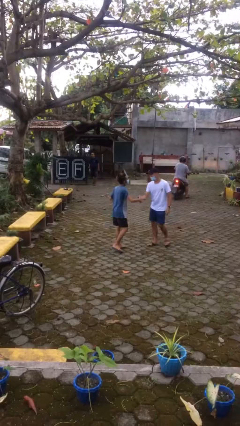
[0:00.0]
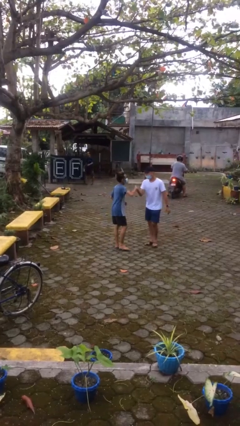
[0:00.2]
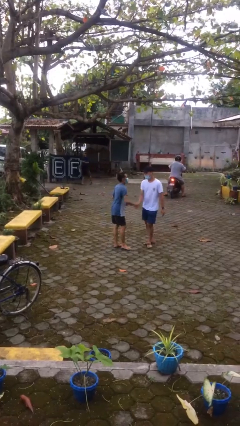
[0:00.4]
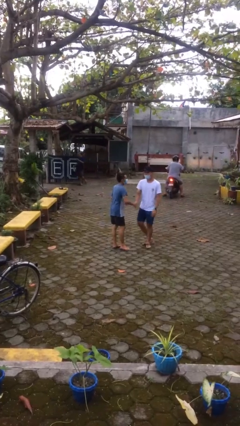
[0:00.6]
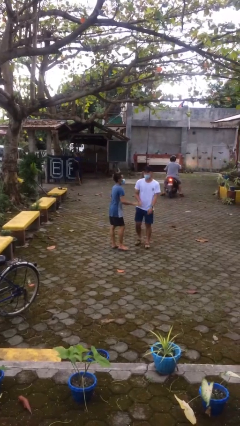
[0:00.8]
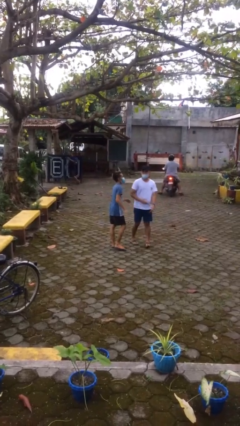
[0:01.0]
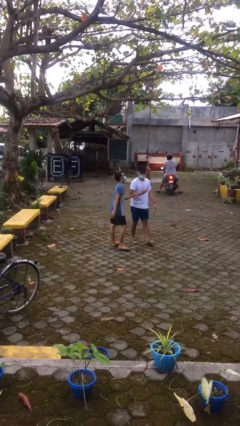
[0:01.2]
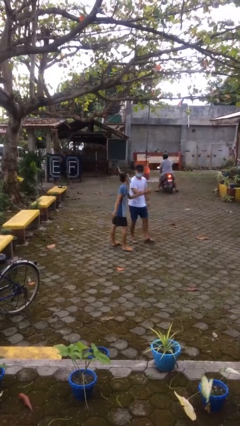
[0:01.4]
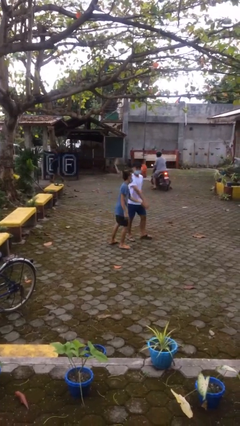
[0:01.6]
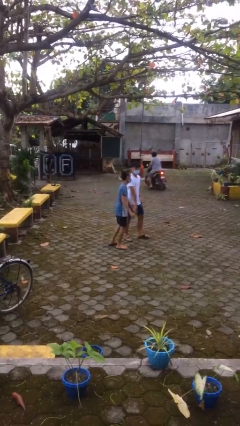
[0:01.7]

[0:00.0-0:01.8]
person shakes hand

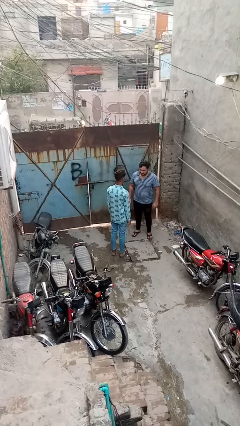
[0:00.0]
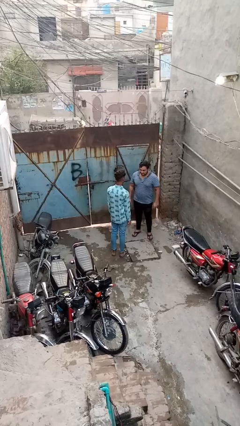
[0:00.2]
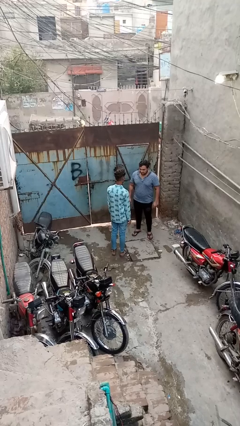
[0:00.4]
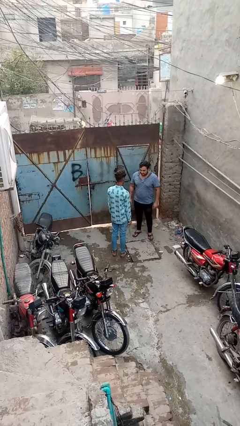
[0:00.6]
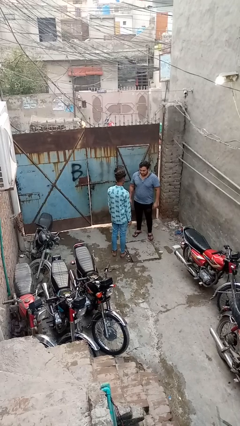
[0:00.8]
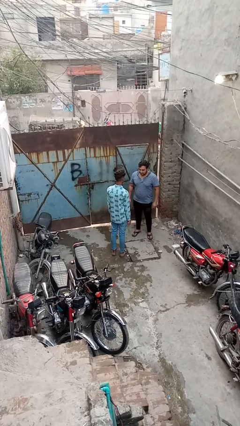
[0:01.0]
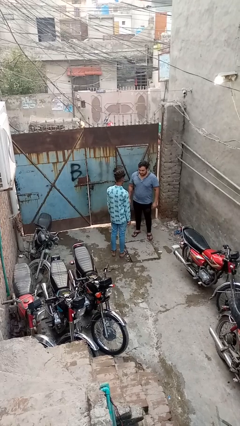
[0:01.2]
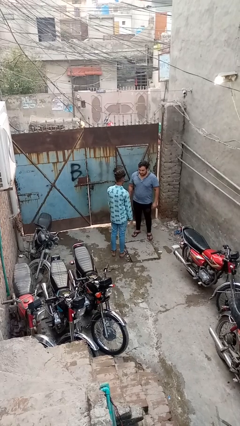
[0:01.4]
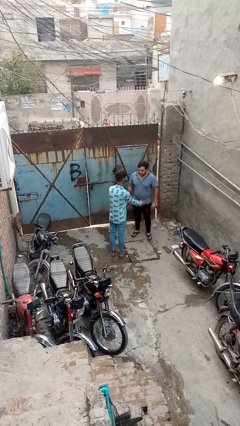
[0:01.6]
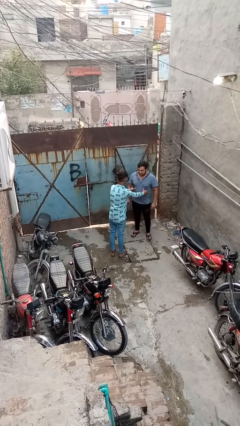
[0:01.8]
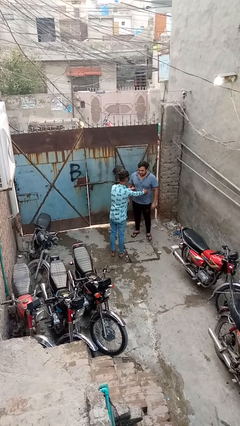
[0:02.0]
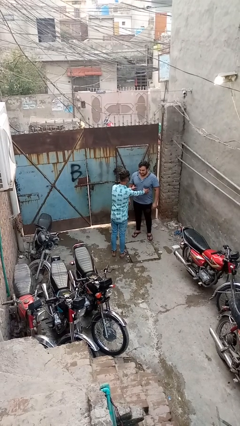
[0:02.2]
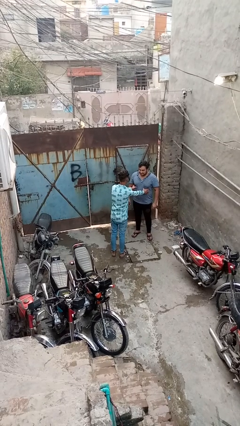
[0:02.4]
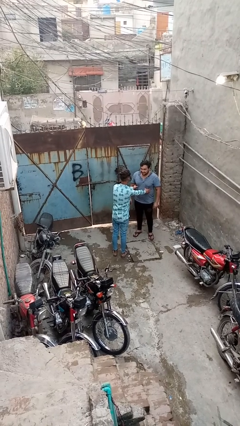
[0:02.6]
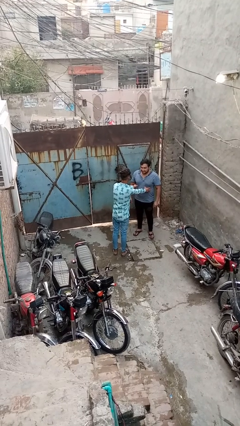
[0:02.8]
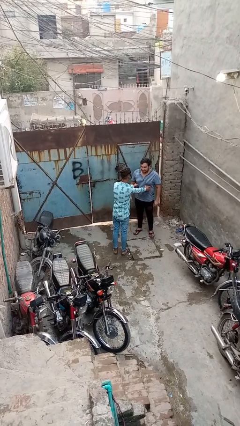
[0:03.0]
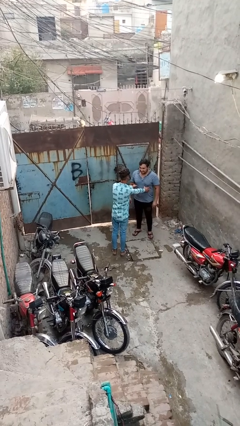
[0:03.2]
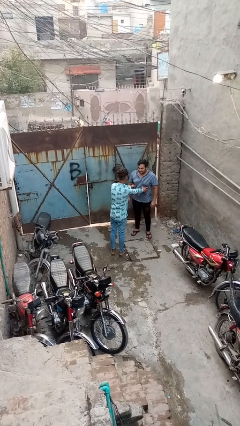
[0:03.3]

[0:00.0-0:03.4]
person tickles person

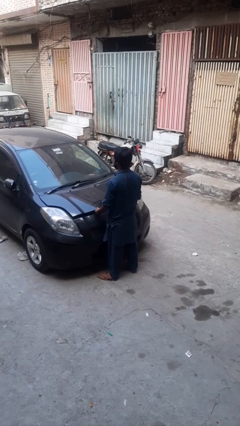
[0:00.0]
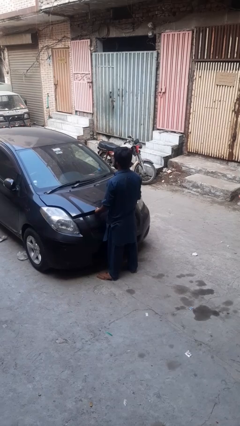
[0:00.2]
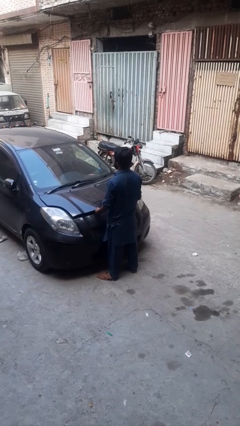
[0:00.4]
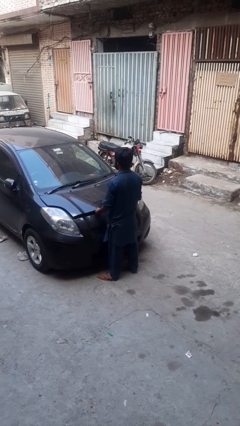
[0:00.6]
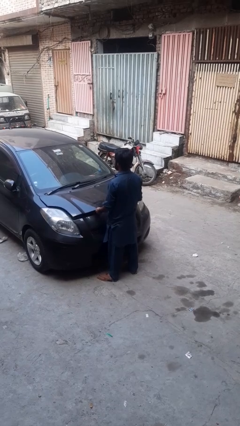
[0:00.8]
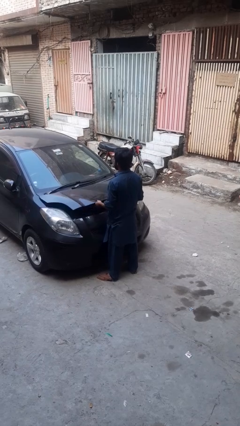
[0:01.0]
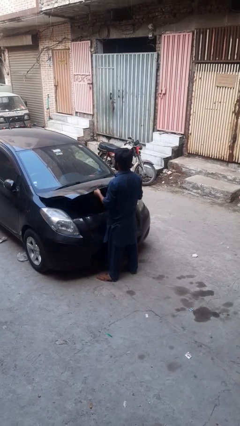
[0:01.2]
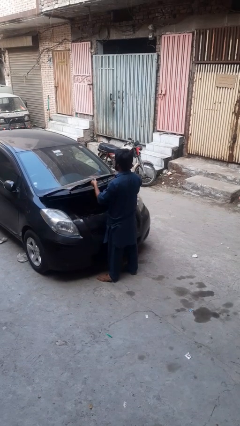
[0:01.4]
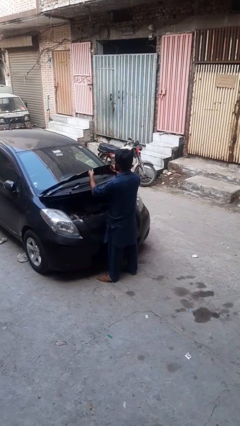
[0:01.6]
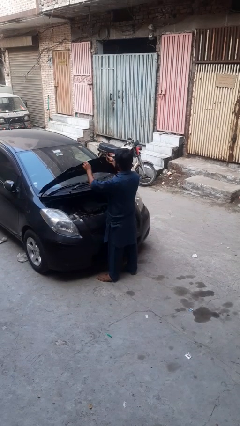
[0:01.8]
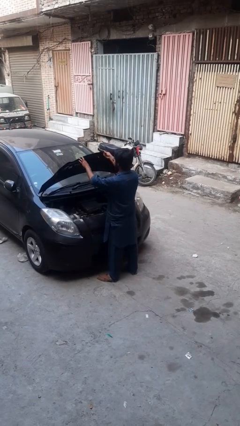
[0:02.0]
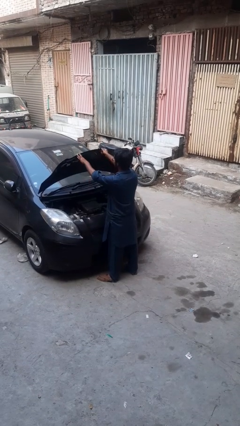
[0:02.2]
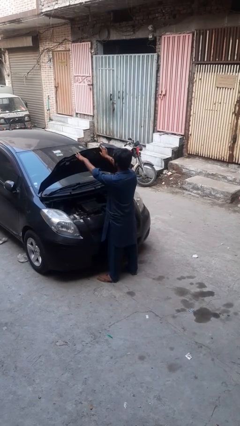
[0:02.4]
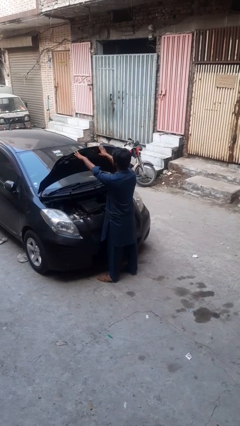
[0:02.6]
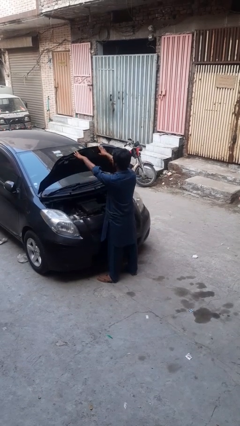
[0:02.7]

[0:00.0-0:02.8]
person opens car hood

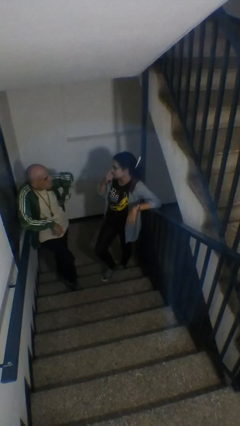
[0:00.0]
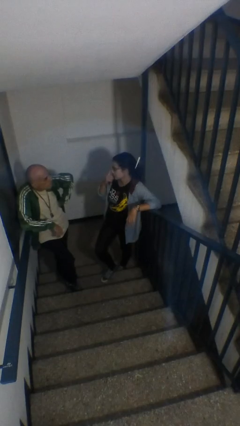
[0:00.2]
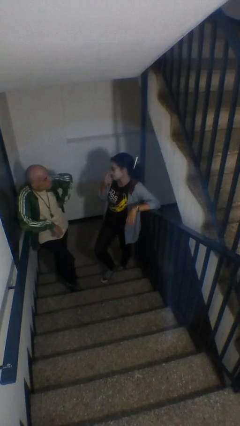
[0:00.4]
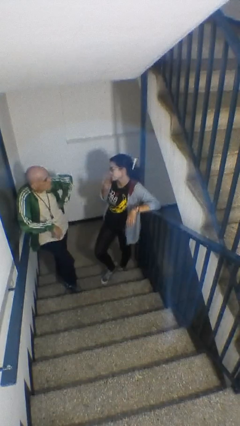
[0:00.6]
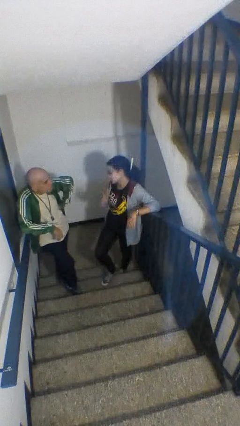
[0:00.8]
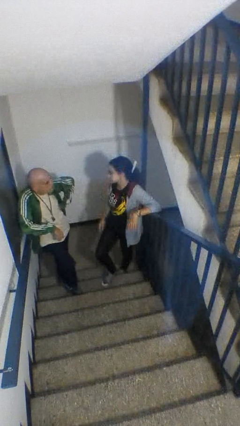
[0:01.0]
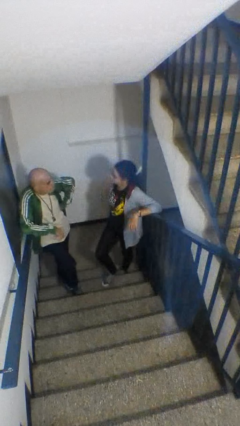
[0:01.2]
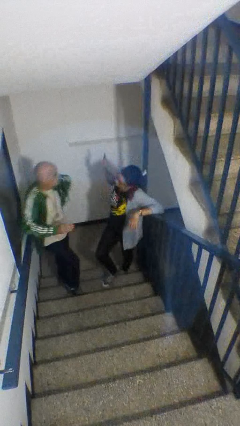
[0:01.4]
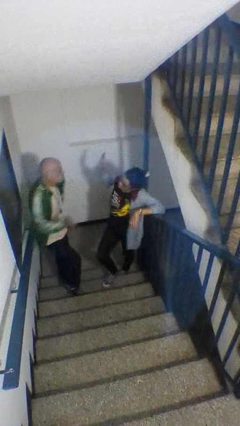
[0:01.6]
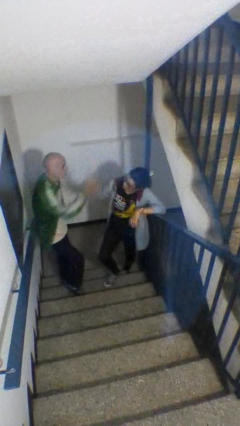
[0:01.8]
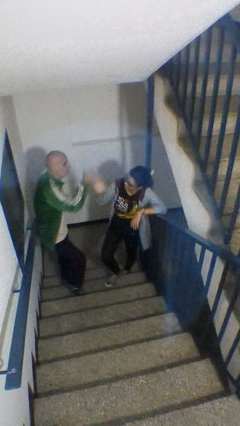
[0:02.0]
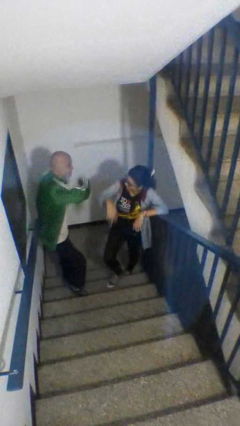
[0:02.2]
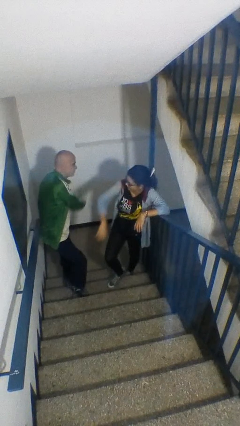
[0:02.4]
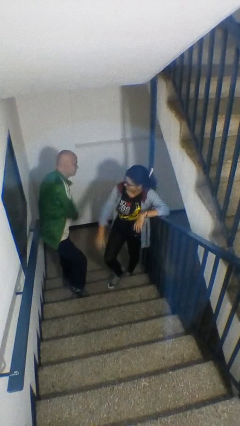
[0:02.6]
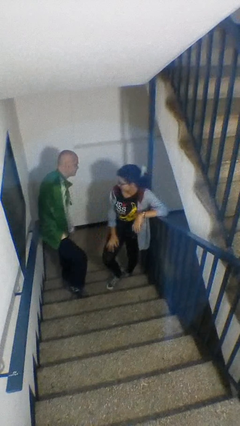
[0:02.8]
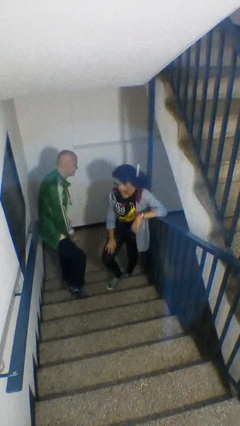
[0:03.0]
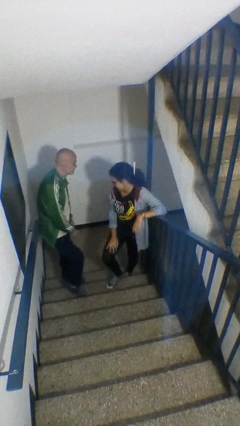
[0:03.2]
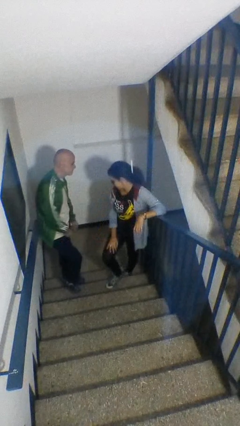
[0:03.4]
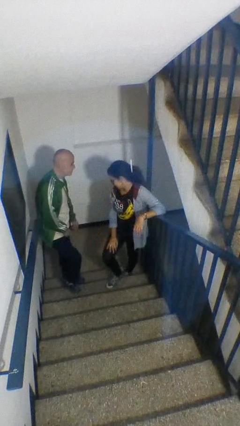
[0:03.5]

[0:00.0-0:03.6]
person highfives hand

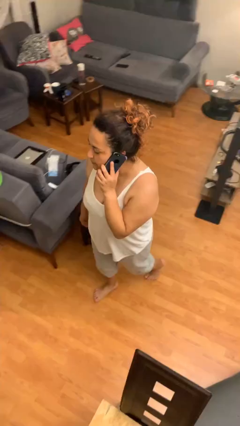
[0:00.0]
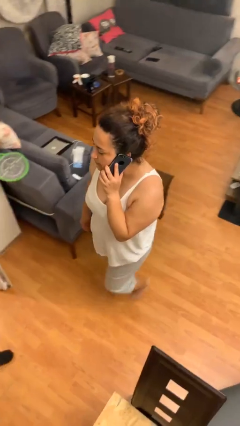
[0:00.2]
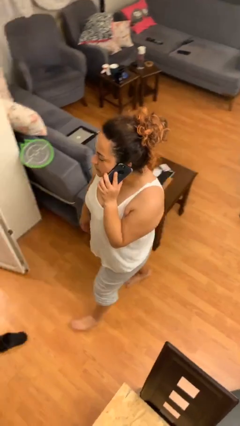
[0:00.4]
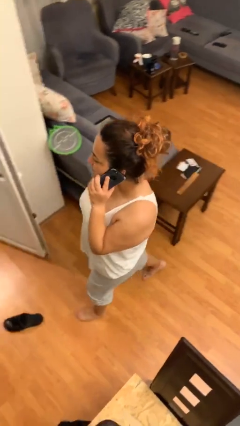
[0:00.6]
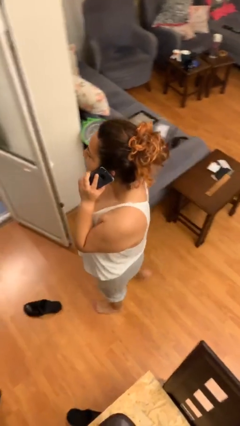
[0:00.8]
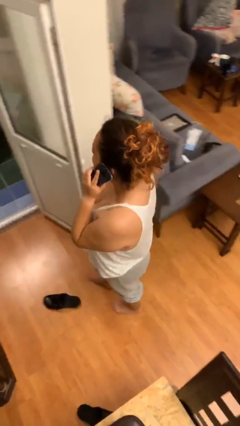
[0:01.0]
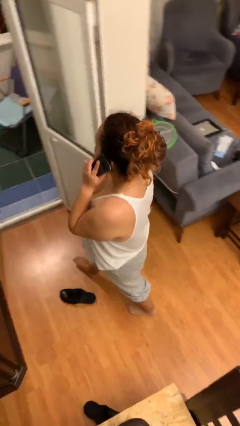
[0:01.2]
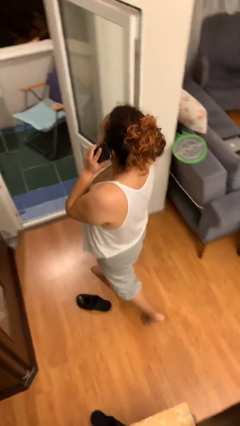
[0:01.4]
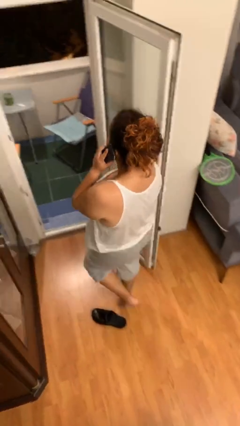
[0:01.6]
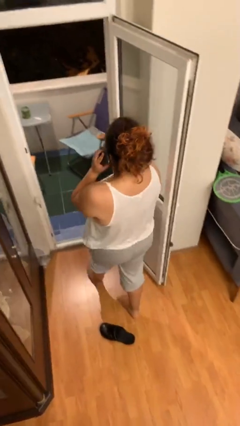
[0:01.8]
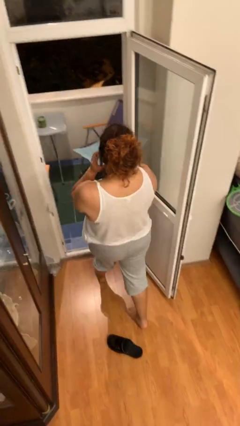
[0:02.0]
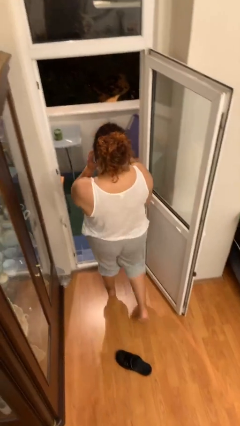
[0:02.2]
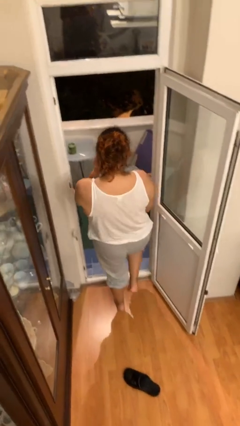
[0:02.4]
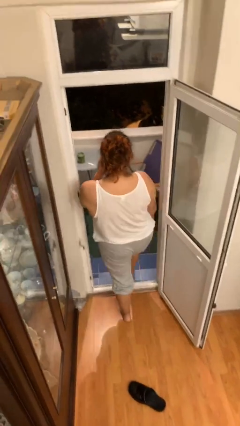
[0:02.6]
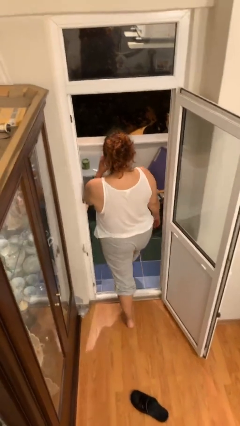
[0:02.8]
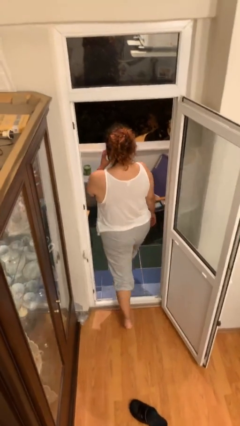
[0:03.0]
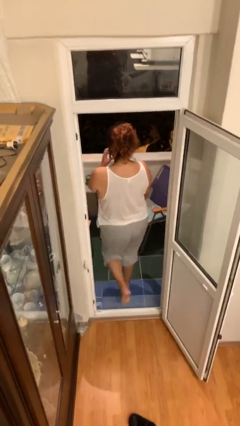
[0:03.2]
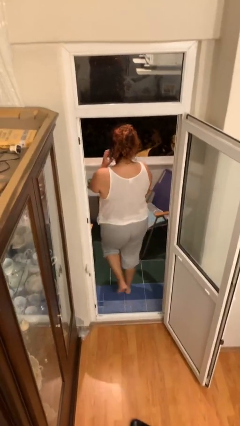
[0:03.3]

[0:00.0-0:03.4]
person exits scene through structure

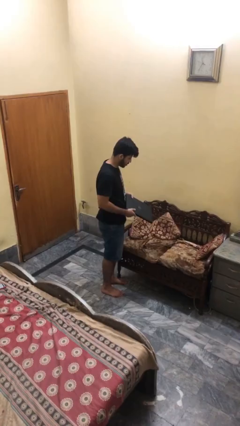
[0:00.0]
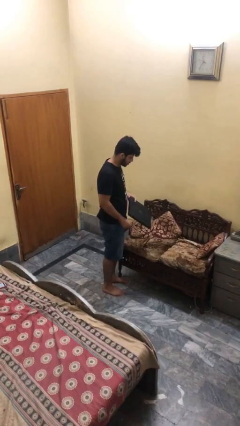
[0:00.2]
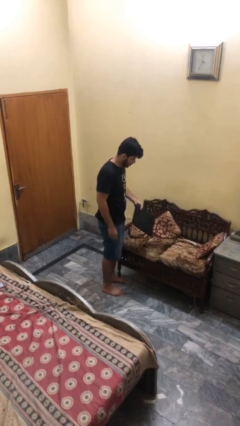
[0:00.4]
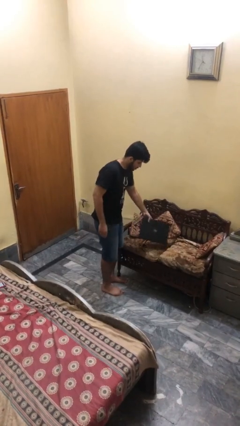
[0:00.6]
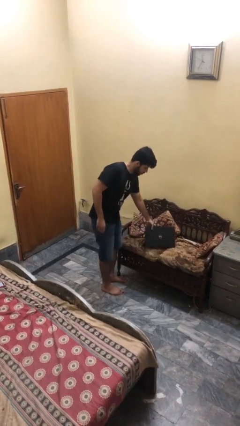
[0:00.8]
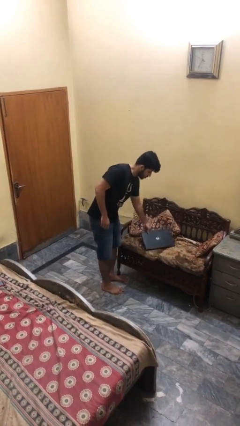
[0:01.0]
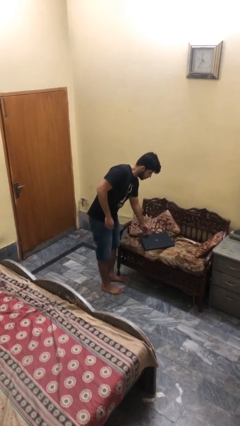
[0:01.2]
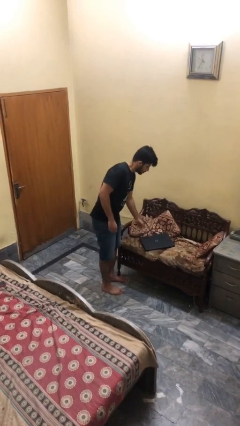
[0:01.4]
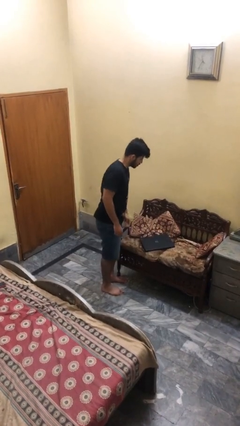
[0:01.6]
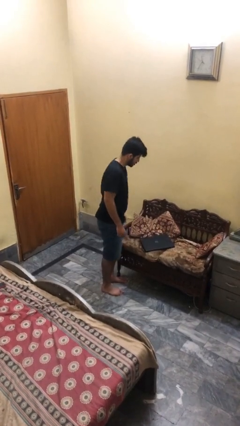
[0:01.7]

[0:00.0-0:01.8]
person puts down object on couch

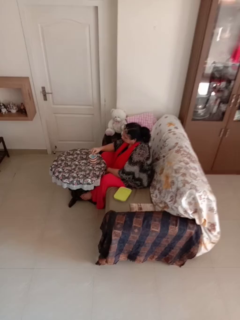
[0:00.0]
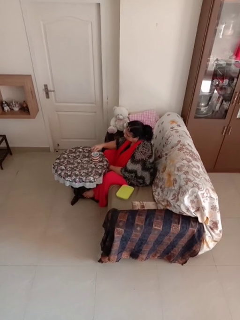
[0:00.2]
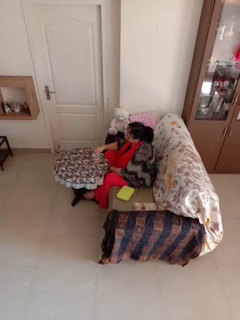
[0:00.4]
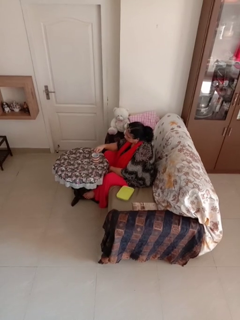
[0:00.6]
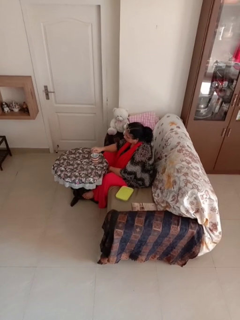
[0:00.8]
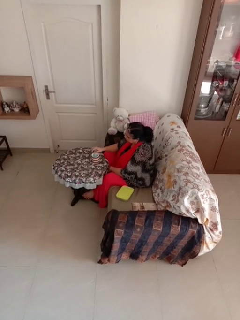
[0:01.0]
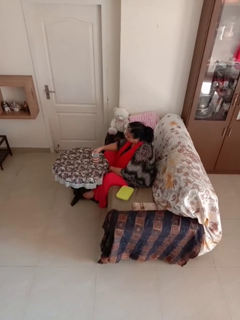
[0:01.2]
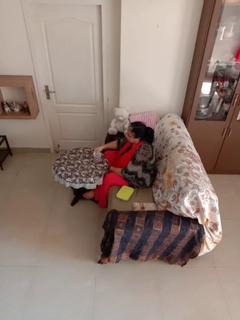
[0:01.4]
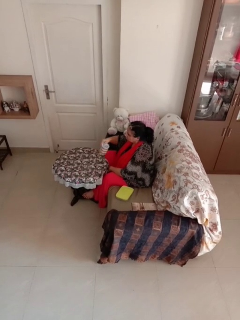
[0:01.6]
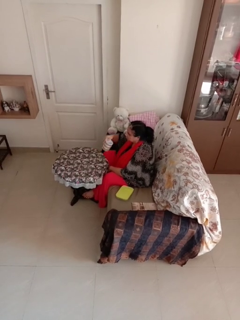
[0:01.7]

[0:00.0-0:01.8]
person stirs mug
